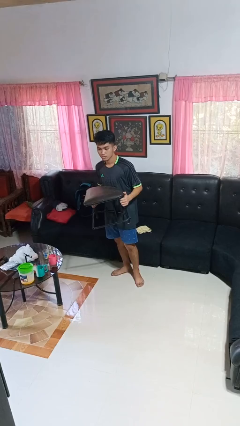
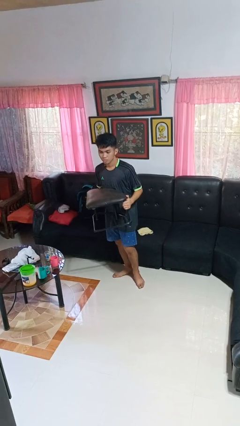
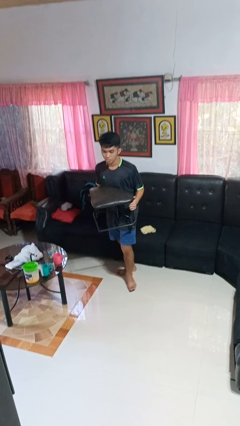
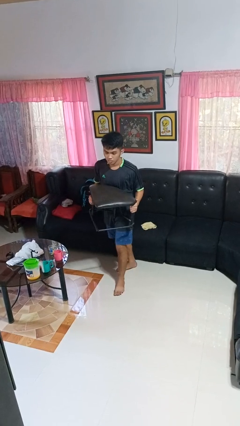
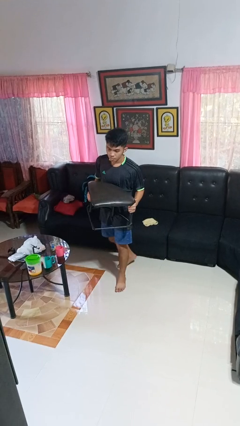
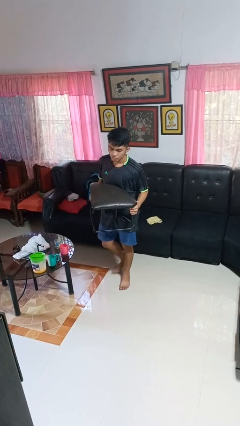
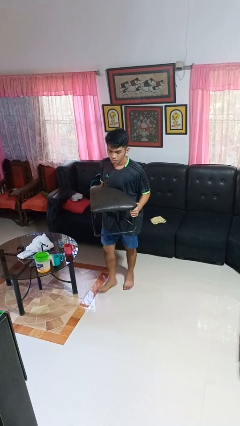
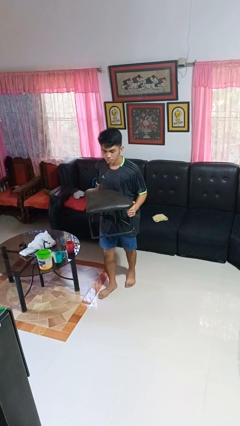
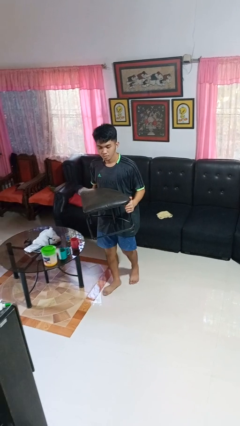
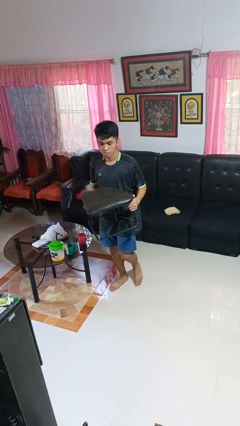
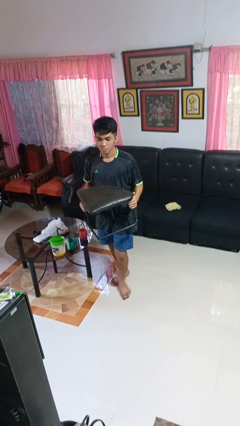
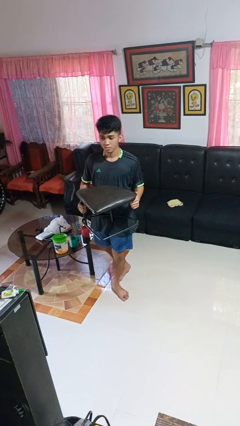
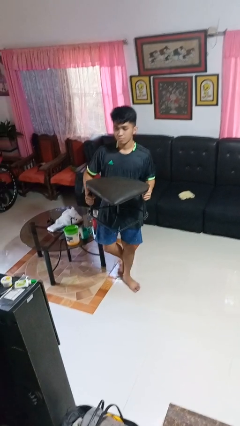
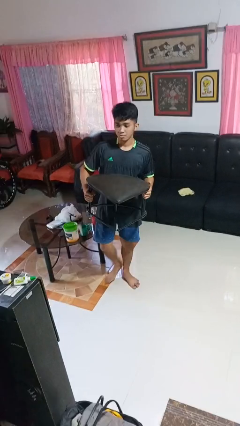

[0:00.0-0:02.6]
person carries furniture

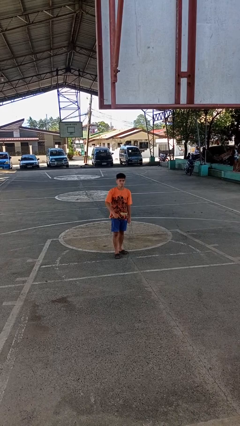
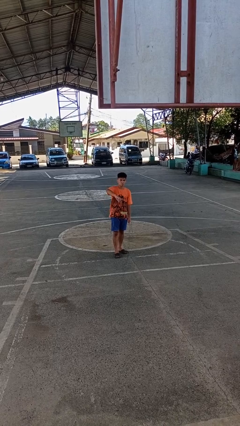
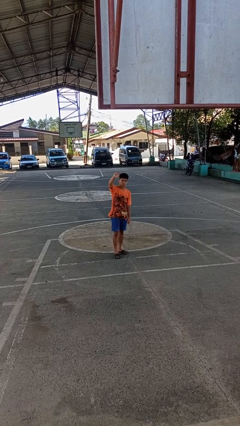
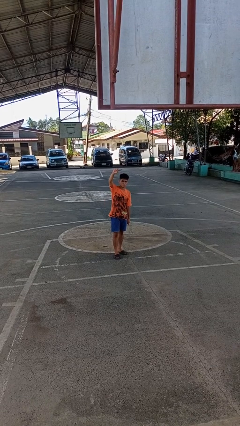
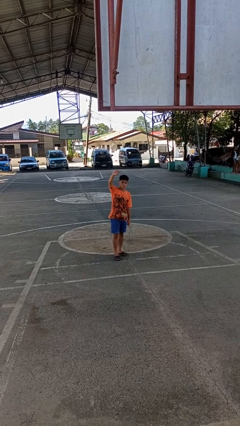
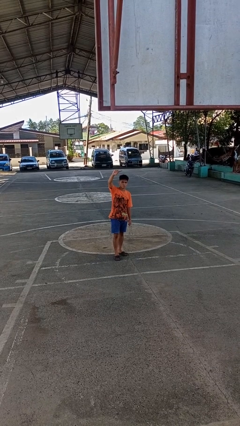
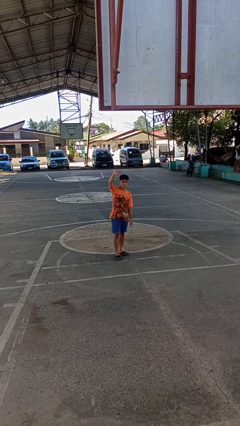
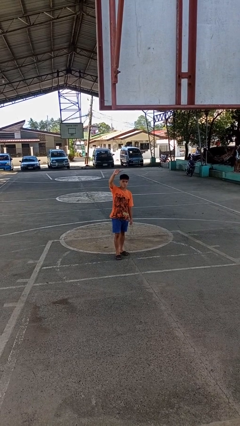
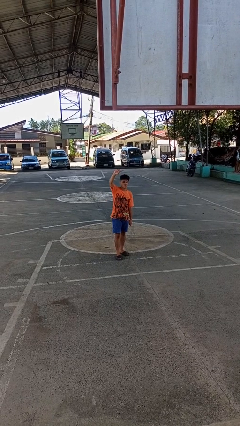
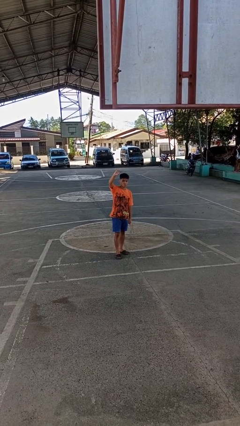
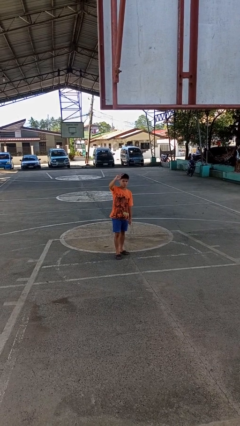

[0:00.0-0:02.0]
person gestures swipe up

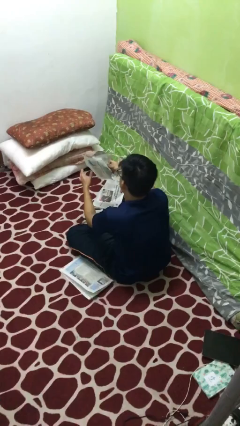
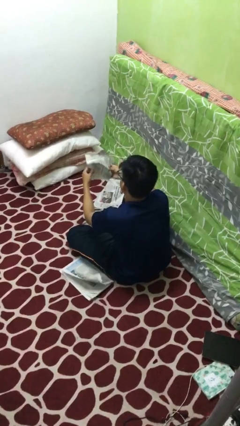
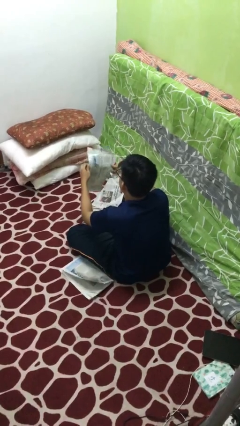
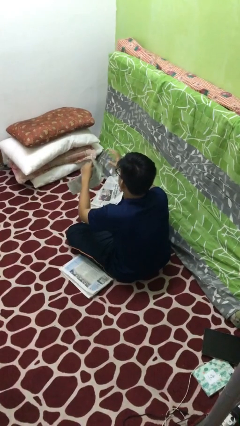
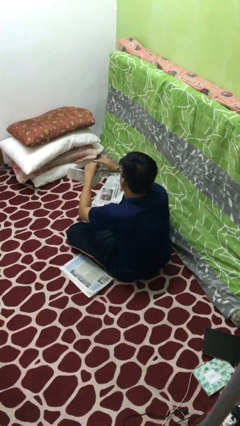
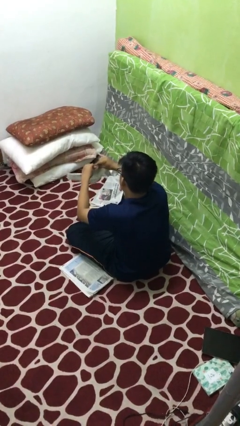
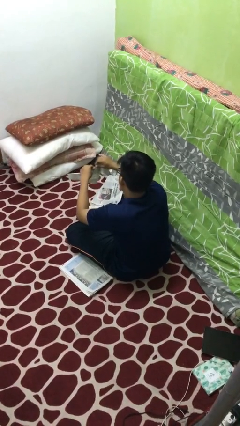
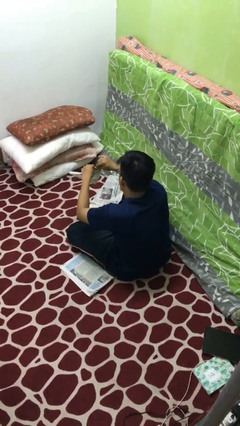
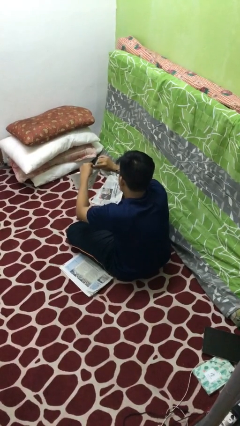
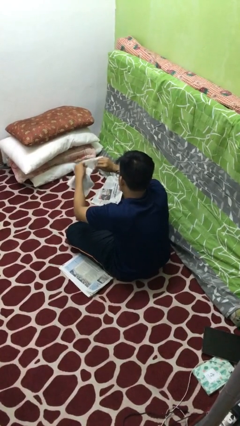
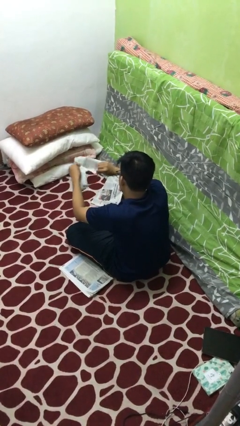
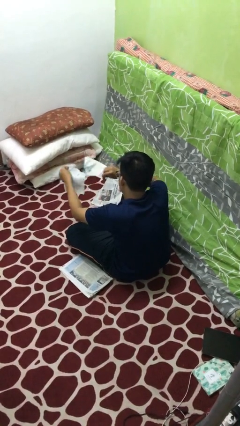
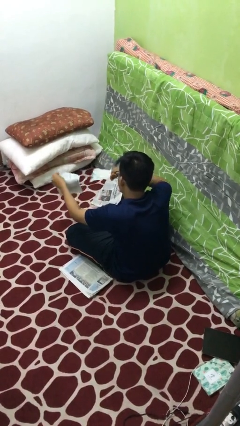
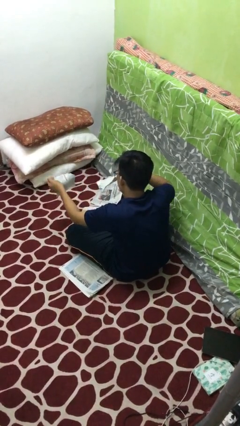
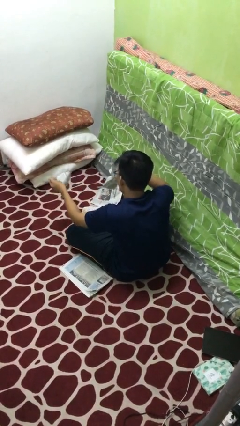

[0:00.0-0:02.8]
person tears paper

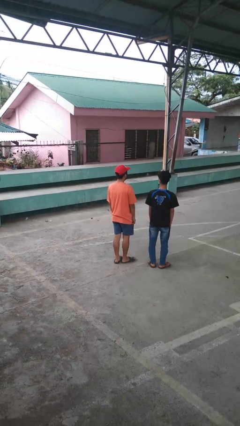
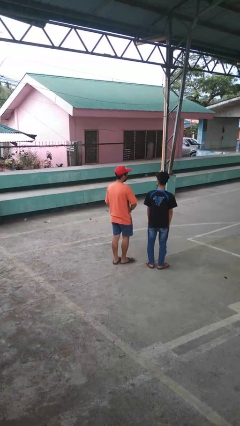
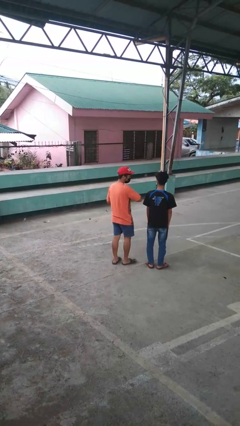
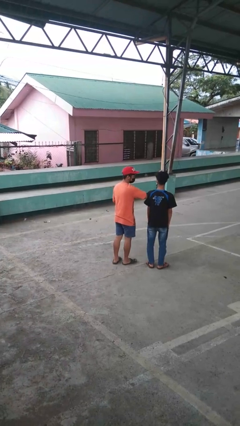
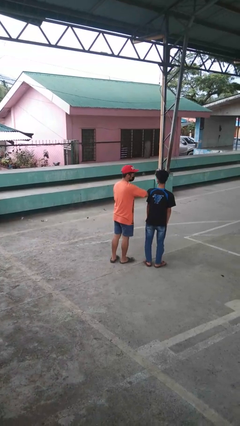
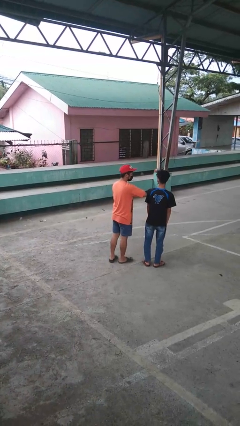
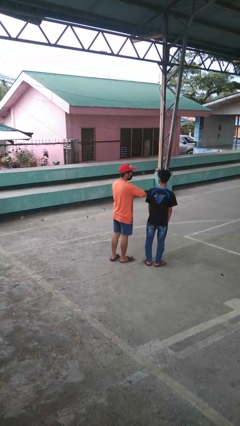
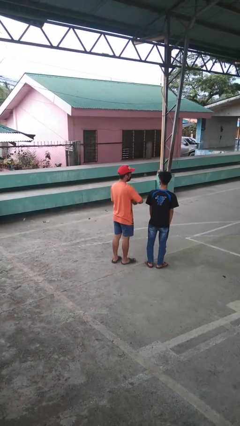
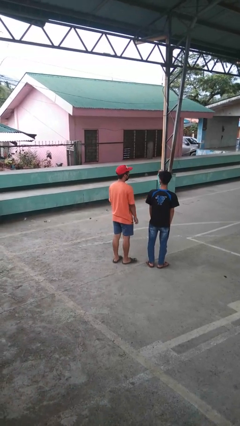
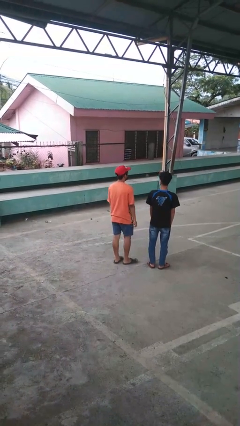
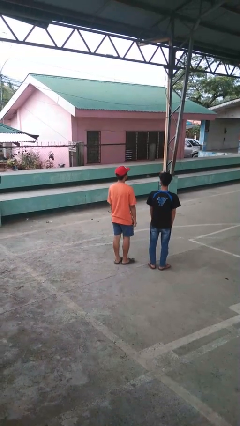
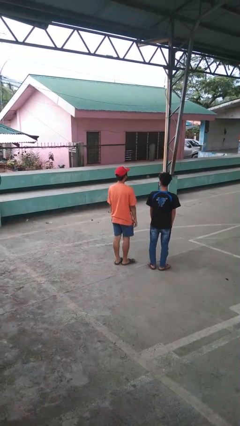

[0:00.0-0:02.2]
person nudges person with elbow

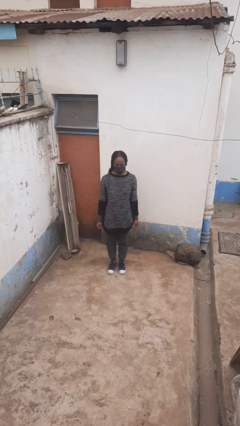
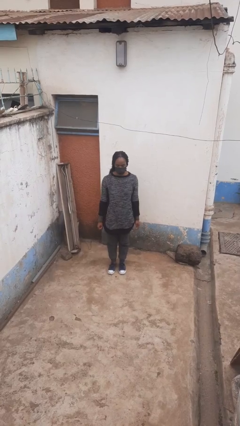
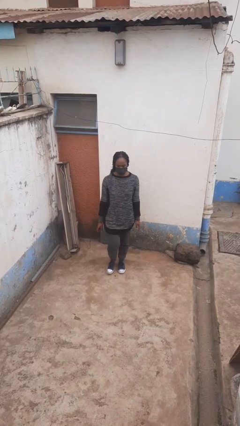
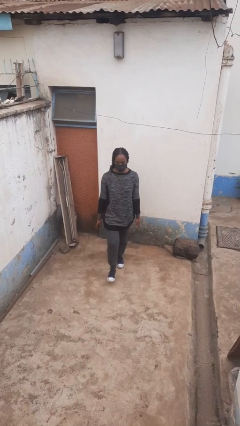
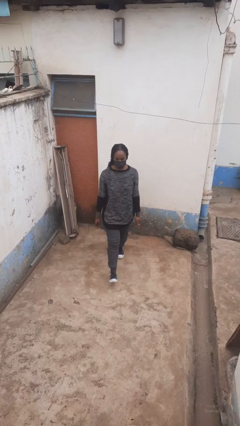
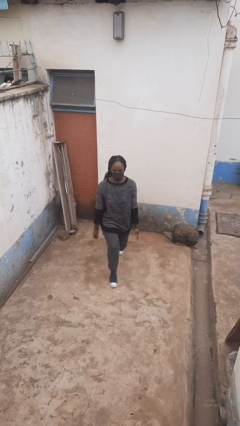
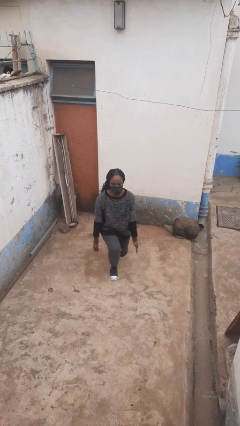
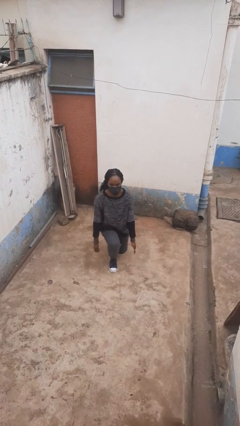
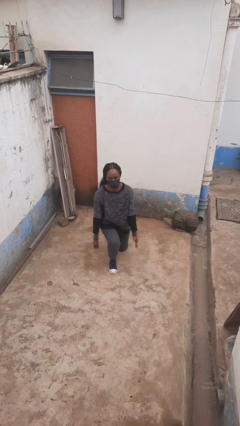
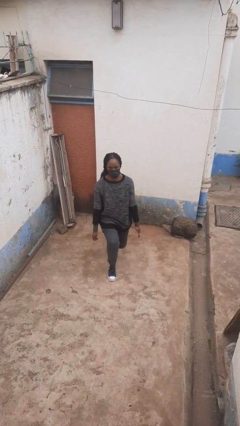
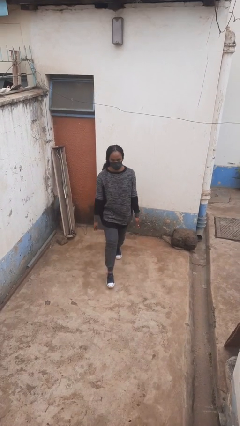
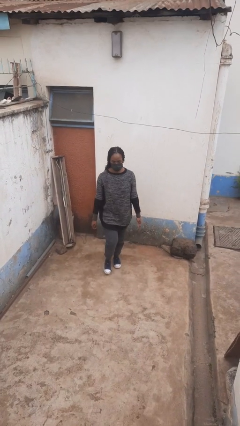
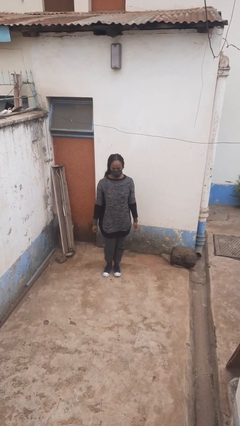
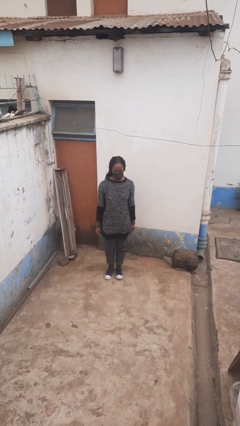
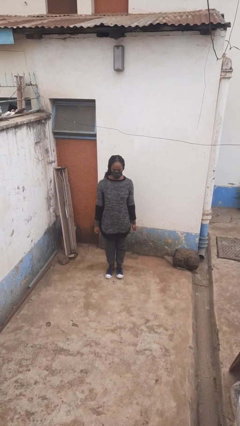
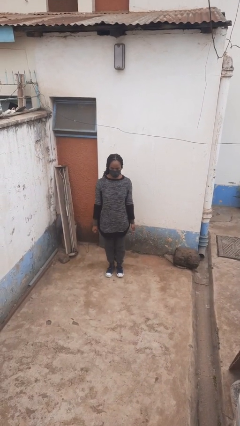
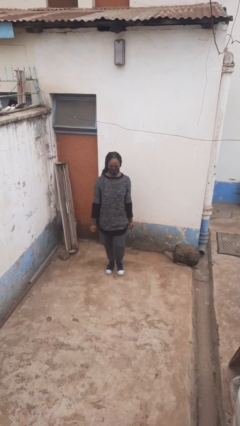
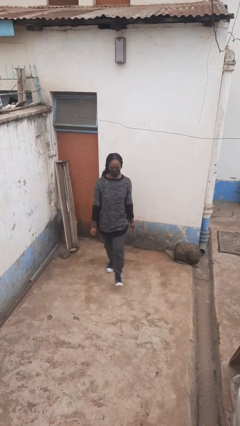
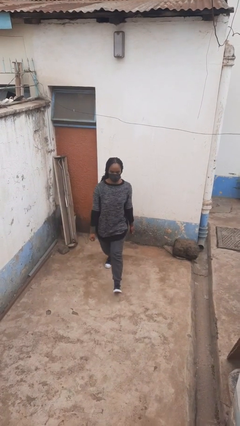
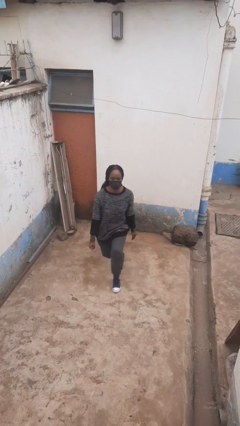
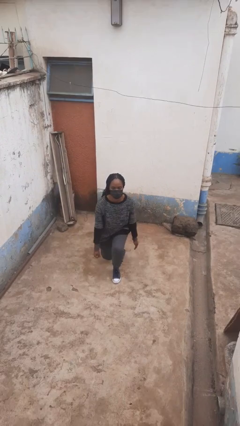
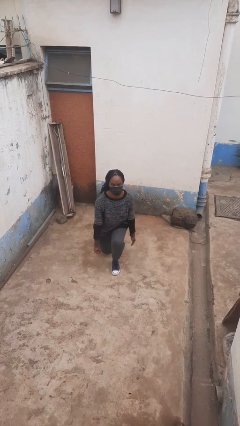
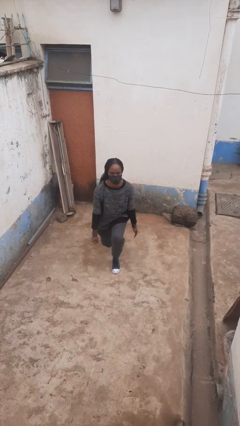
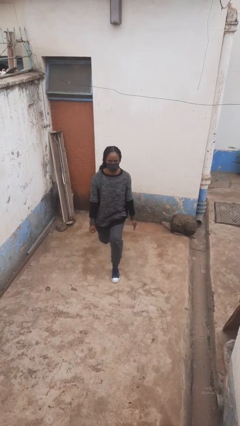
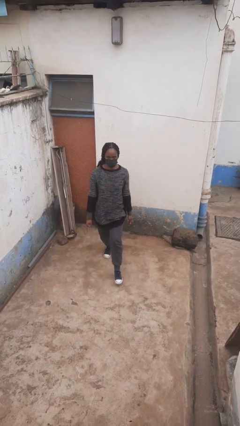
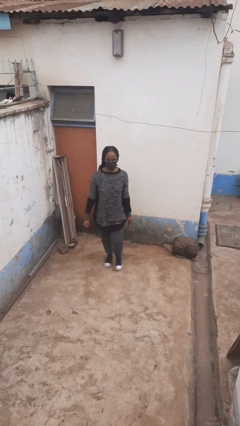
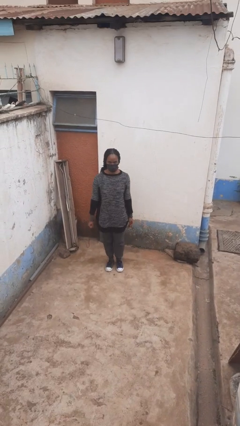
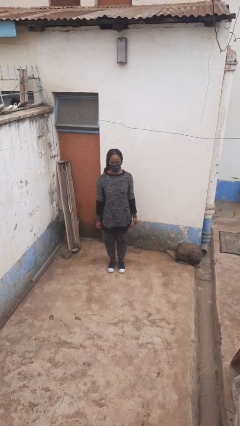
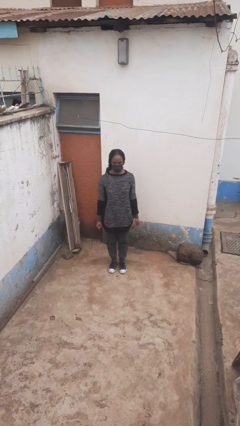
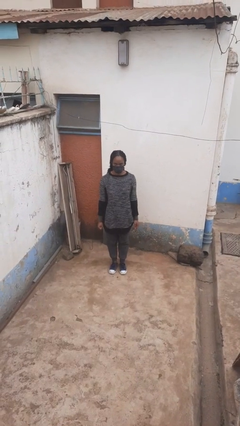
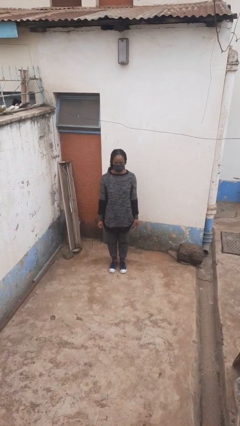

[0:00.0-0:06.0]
person exercises with lunges

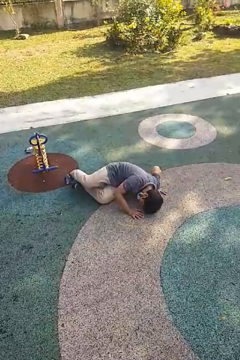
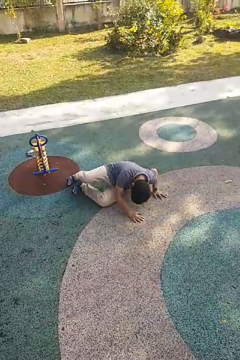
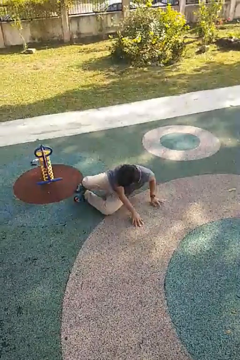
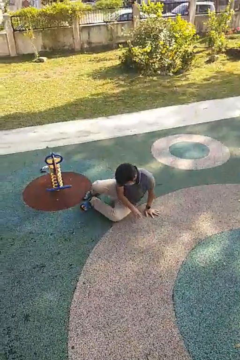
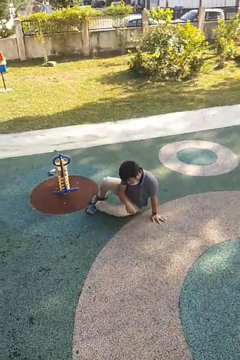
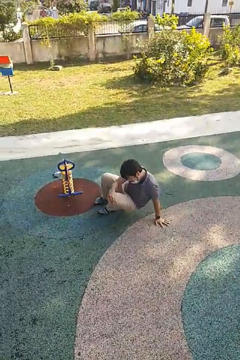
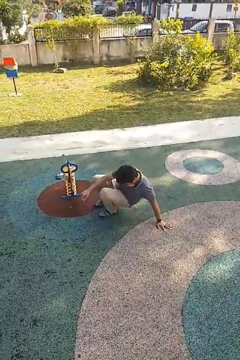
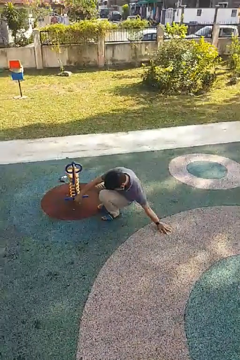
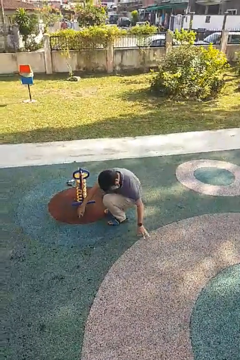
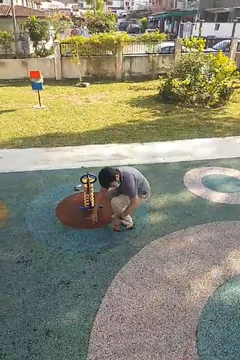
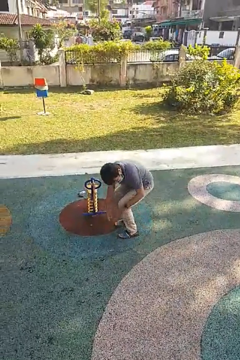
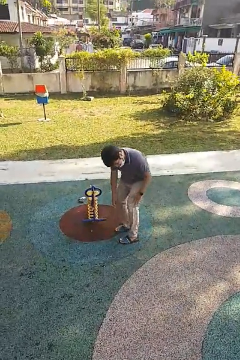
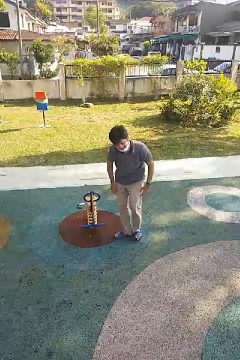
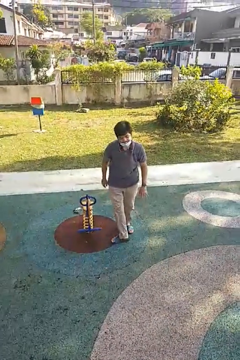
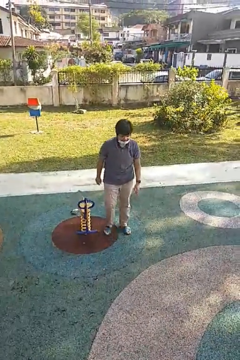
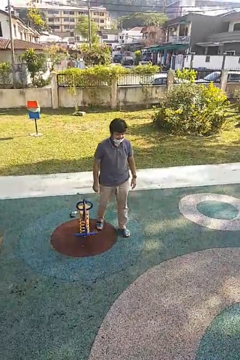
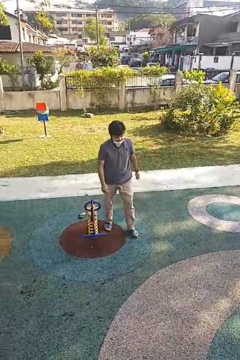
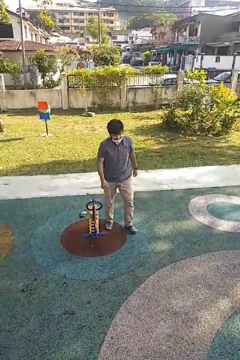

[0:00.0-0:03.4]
person stands up from floor
